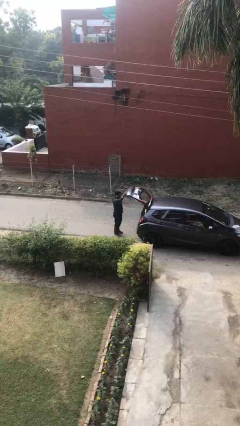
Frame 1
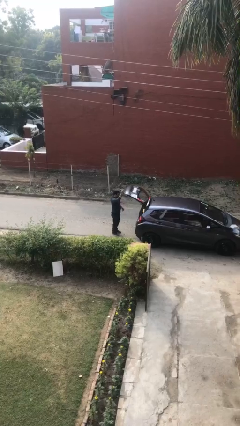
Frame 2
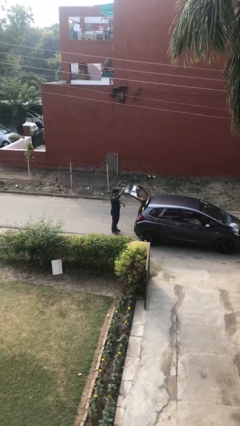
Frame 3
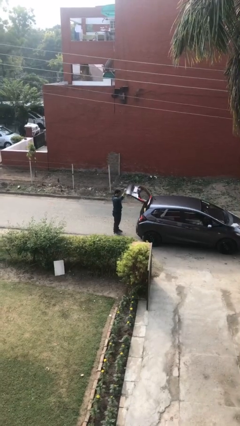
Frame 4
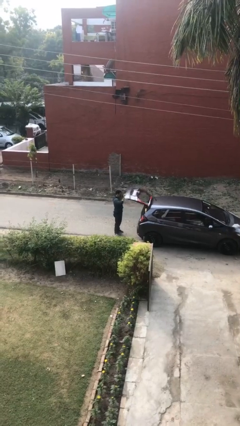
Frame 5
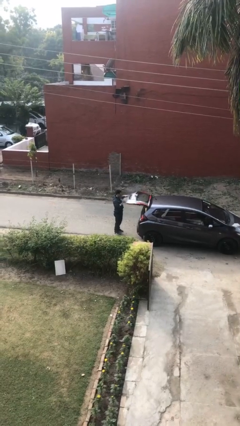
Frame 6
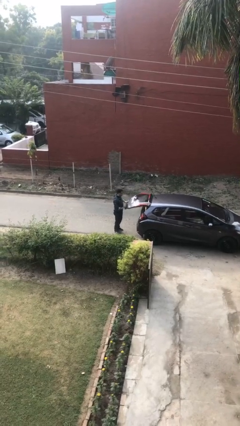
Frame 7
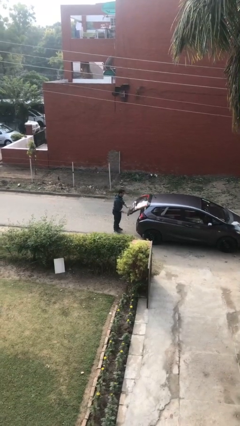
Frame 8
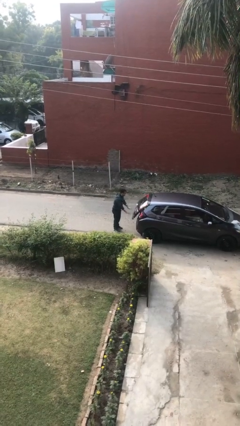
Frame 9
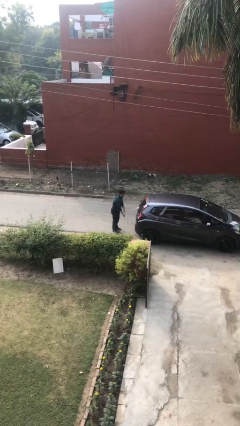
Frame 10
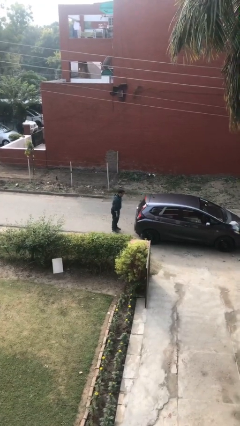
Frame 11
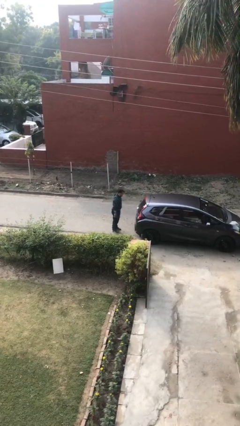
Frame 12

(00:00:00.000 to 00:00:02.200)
person closes car trunk

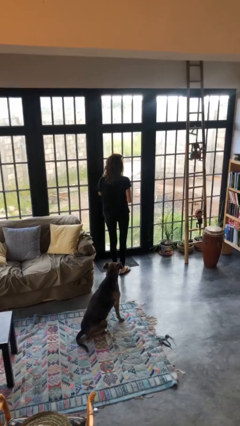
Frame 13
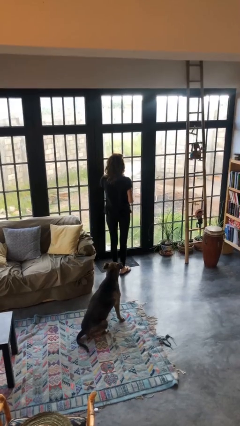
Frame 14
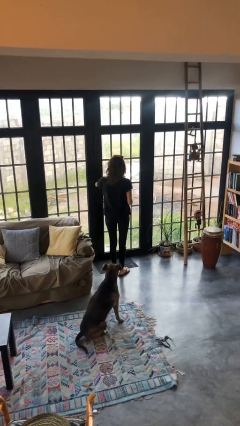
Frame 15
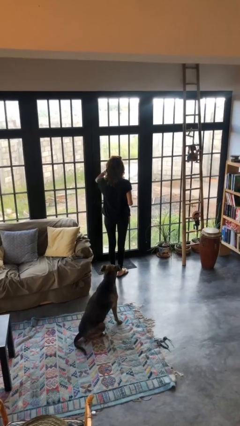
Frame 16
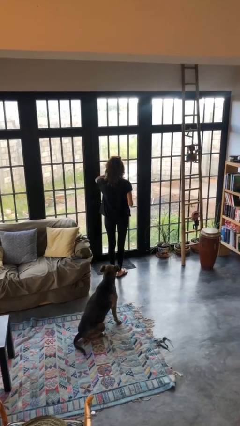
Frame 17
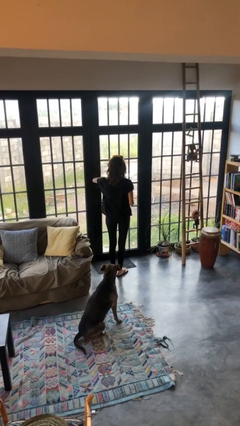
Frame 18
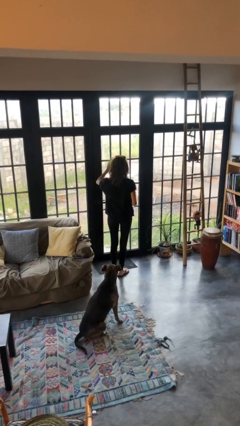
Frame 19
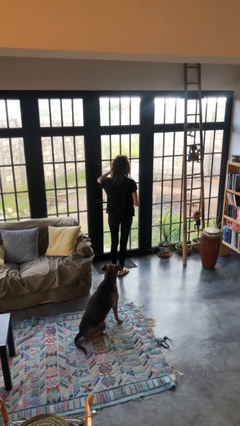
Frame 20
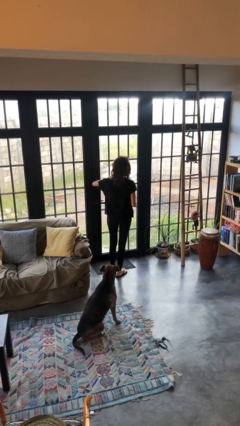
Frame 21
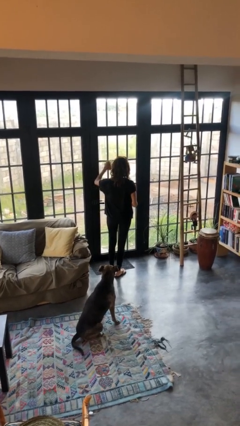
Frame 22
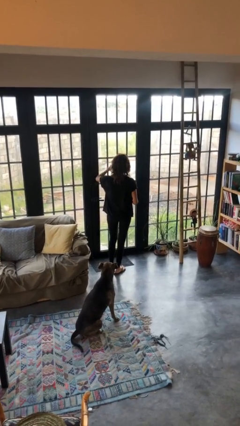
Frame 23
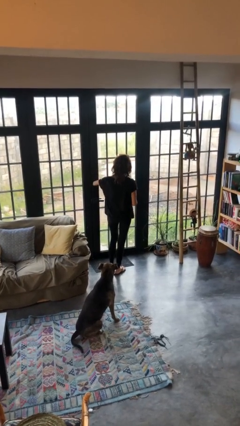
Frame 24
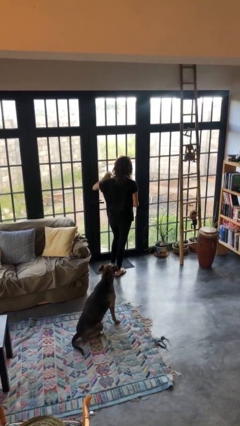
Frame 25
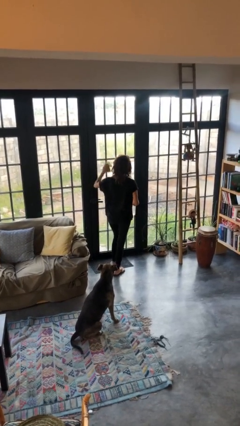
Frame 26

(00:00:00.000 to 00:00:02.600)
person washes window

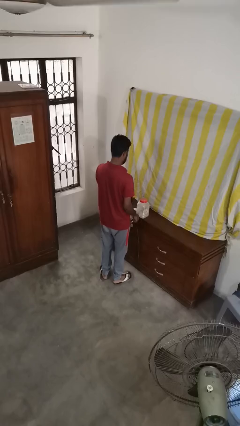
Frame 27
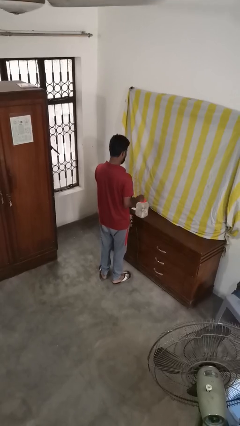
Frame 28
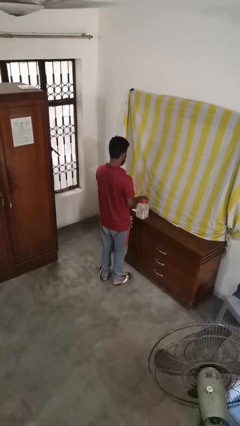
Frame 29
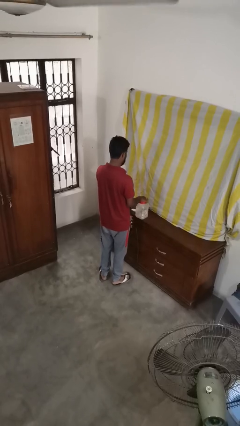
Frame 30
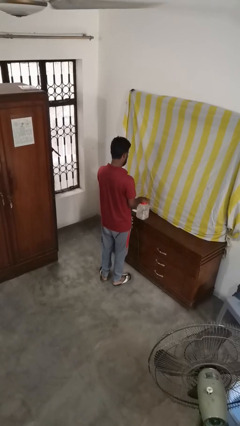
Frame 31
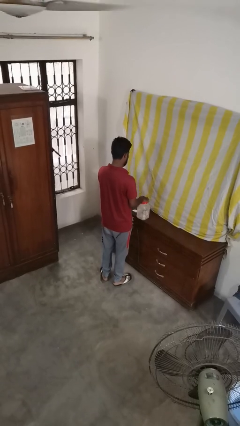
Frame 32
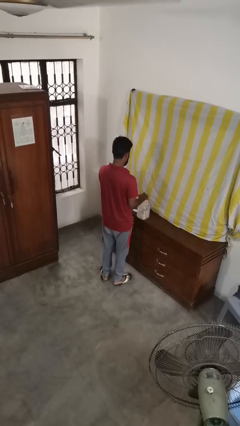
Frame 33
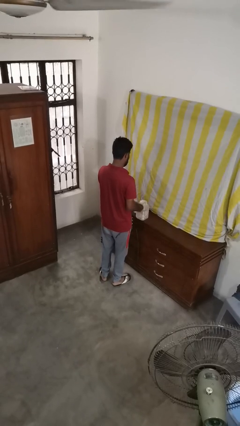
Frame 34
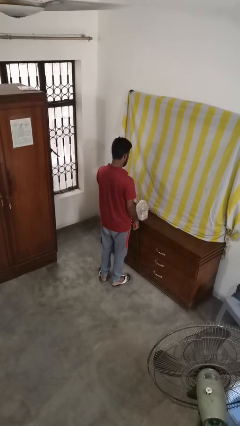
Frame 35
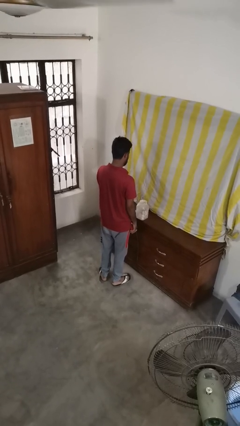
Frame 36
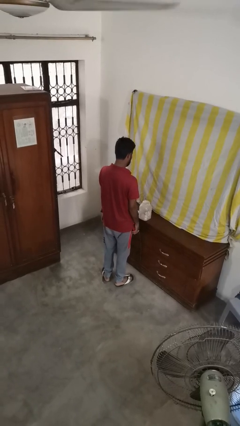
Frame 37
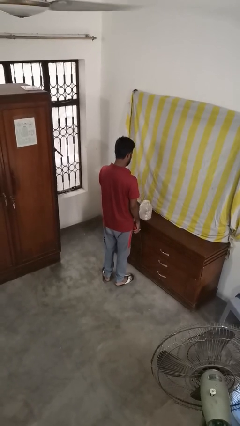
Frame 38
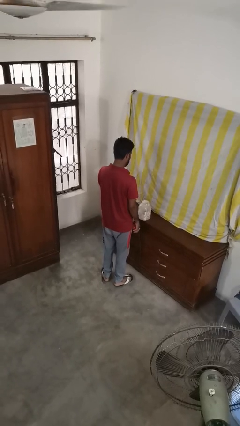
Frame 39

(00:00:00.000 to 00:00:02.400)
person opens jar

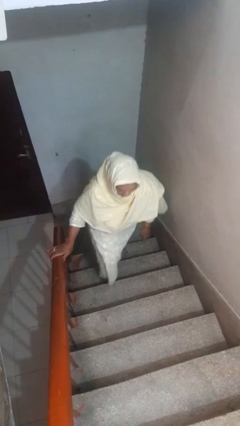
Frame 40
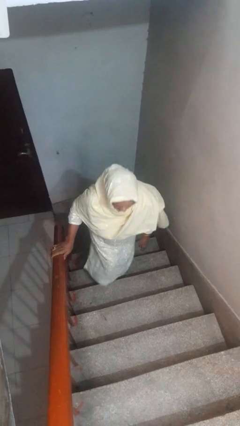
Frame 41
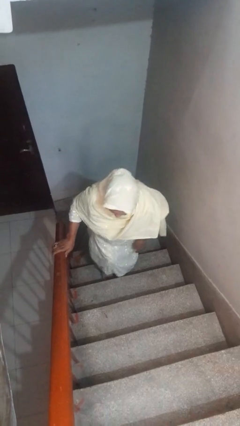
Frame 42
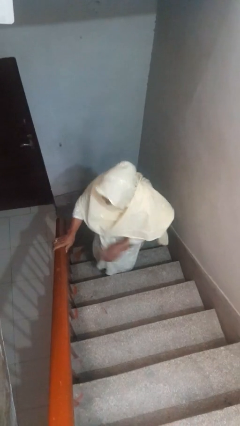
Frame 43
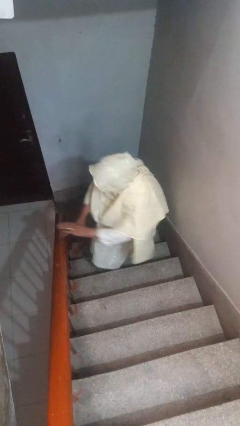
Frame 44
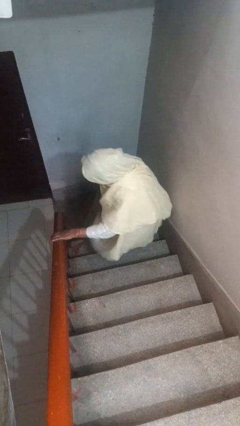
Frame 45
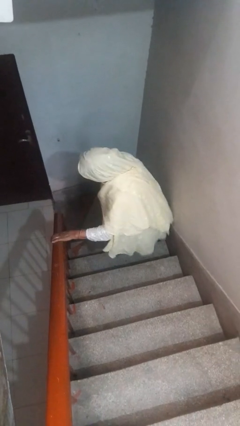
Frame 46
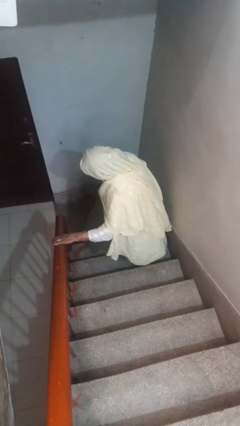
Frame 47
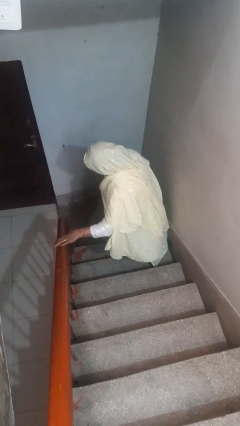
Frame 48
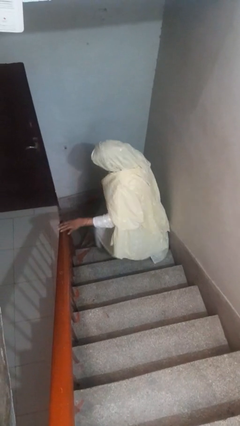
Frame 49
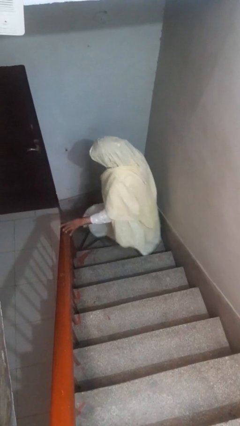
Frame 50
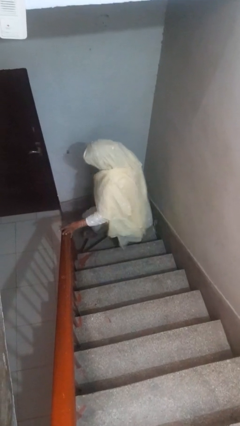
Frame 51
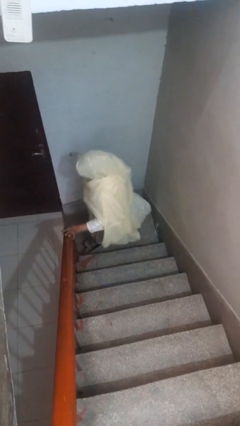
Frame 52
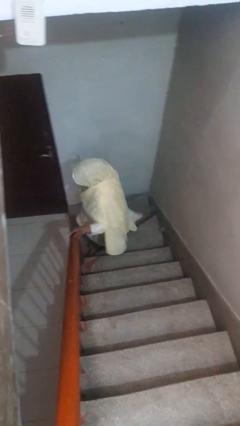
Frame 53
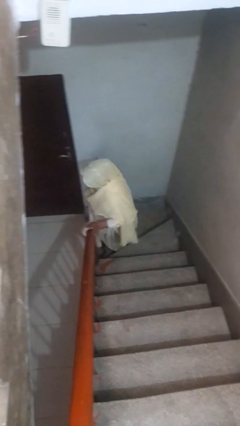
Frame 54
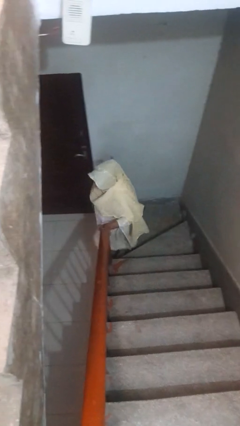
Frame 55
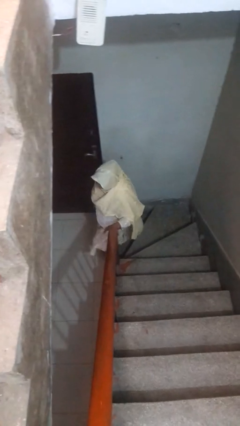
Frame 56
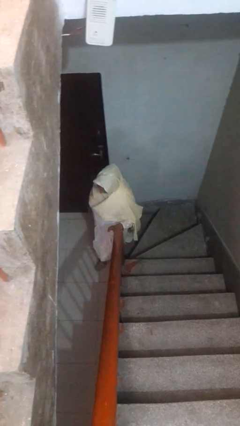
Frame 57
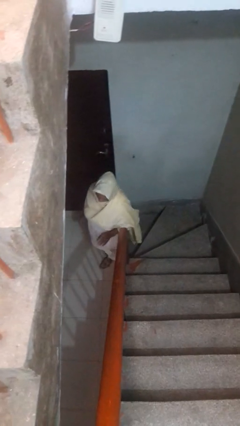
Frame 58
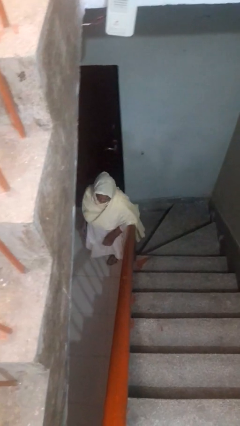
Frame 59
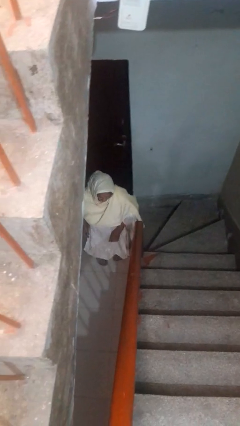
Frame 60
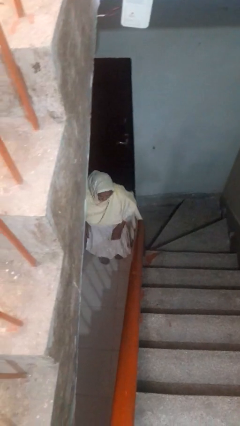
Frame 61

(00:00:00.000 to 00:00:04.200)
person climbs down stairs

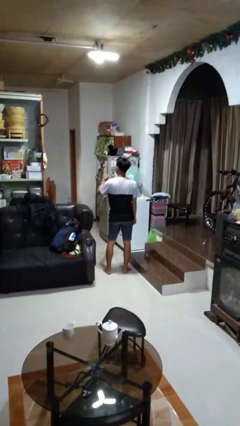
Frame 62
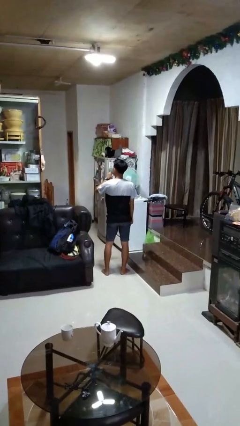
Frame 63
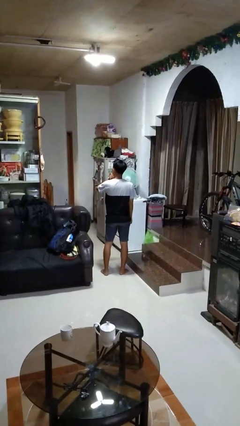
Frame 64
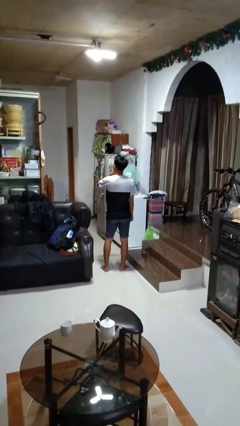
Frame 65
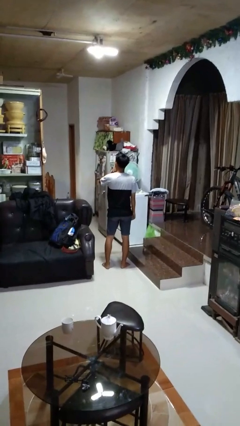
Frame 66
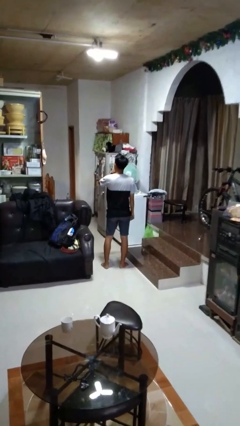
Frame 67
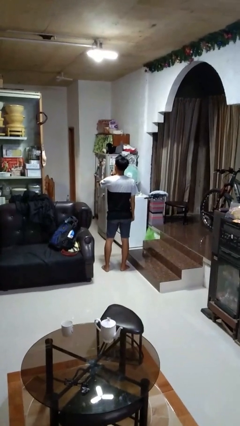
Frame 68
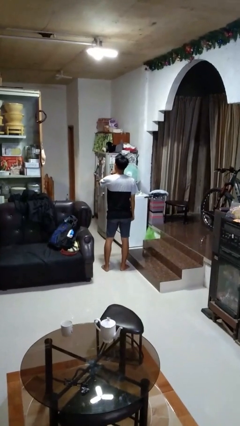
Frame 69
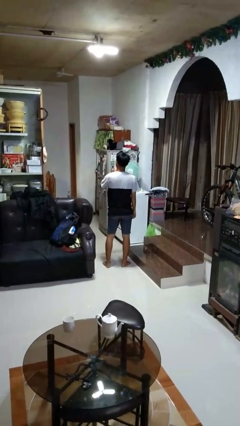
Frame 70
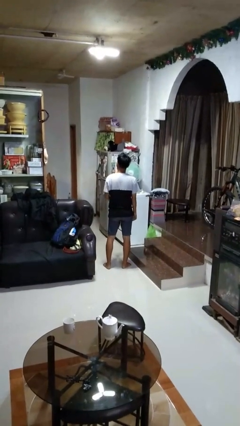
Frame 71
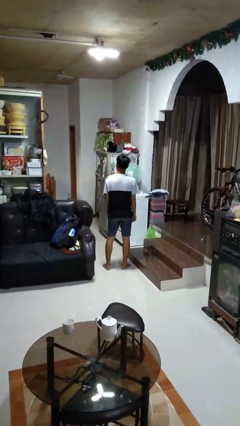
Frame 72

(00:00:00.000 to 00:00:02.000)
person gestures be quiet

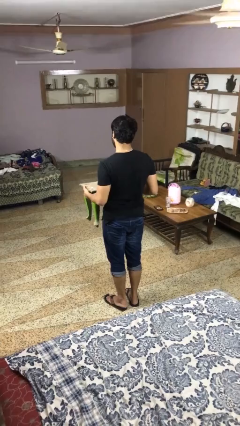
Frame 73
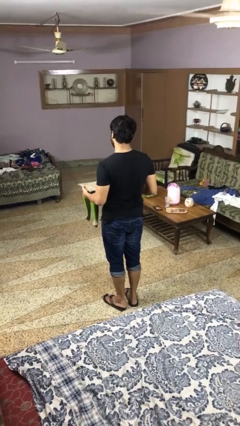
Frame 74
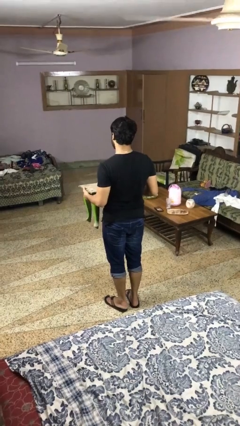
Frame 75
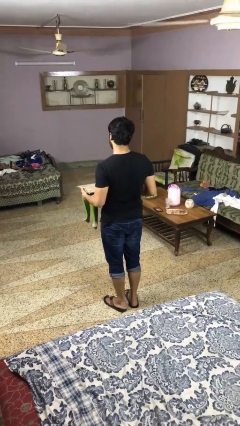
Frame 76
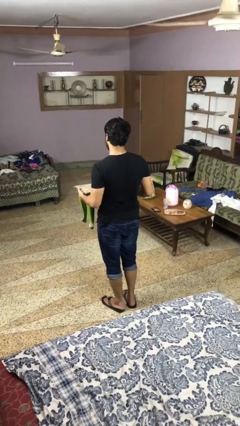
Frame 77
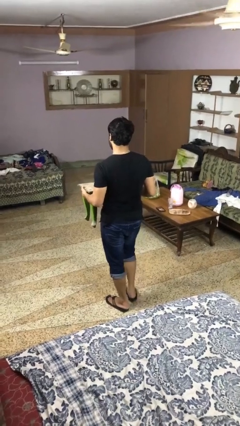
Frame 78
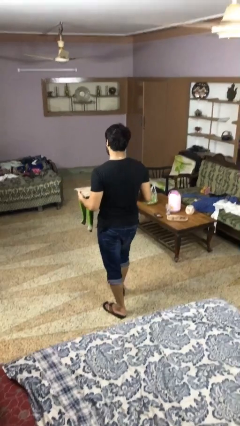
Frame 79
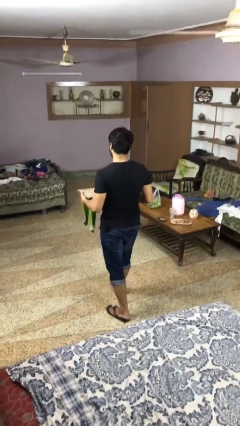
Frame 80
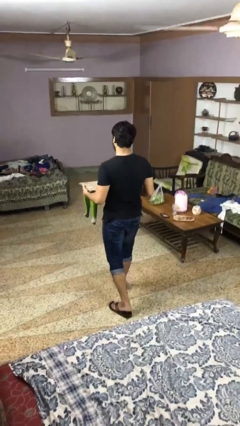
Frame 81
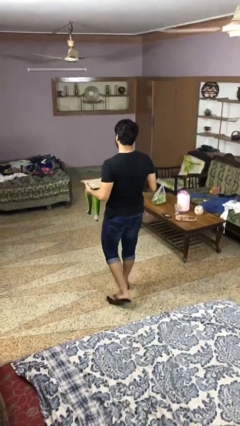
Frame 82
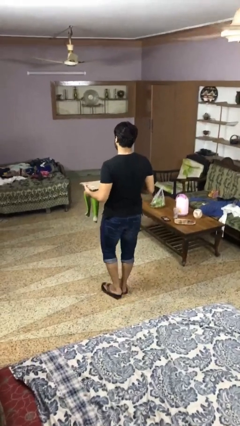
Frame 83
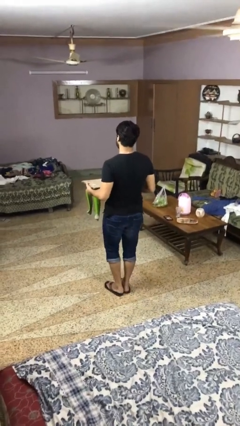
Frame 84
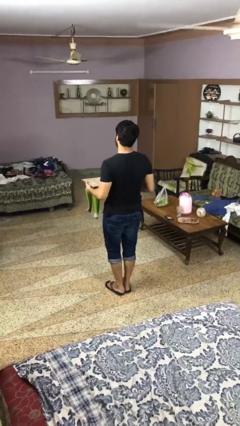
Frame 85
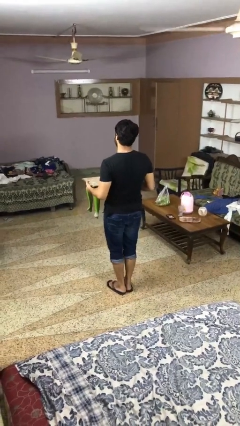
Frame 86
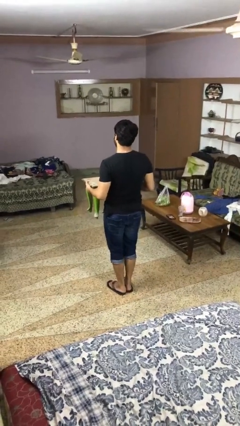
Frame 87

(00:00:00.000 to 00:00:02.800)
person carries furniture

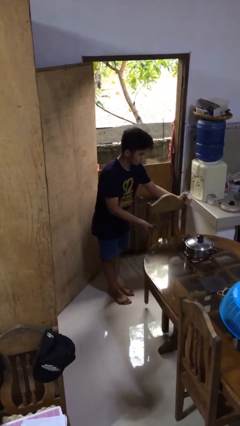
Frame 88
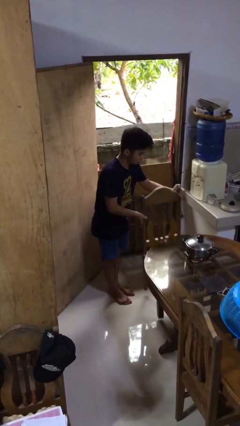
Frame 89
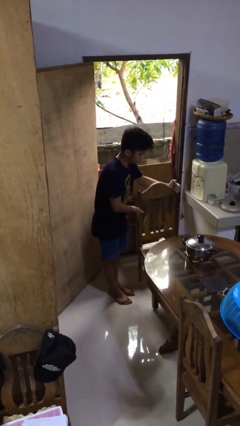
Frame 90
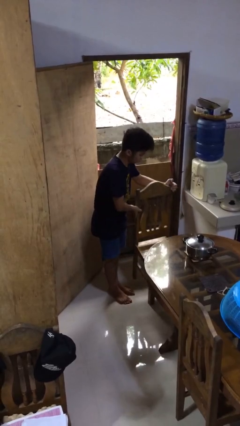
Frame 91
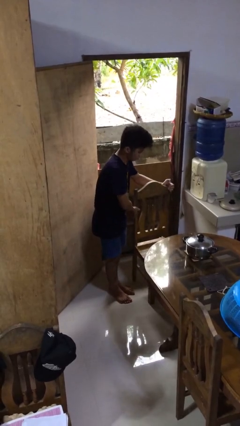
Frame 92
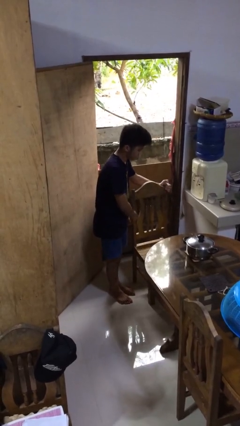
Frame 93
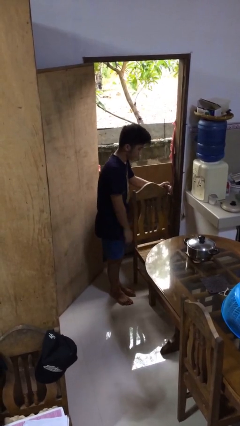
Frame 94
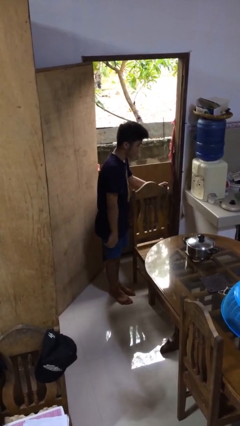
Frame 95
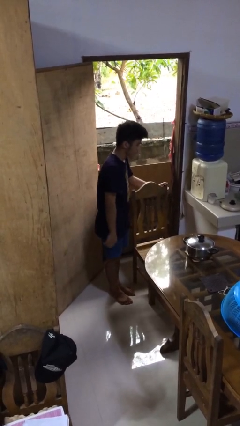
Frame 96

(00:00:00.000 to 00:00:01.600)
person pulls out chair
